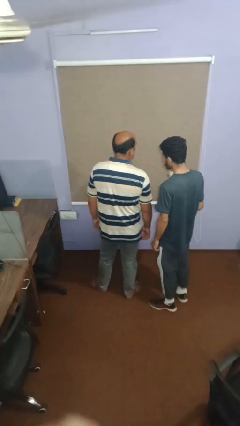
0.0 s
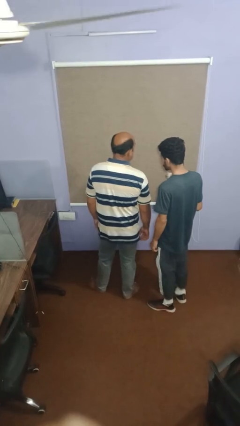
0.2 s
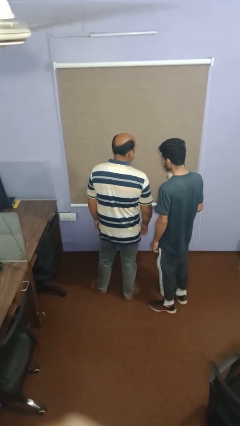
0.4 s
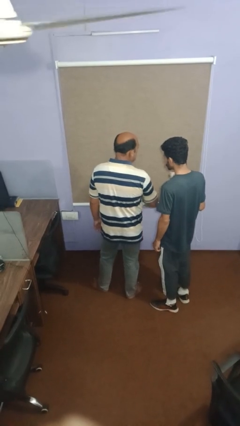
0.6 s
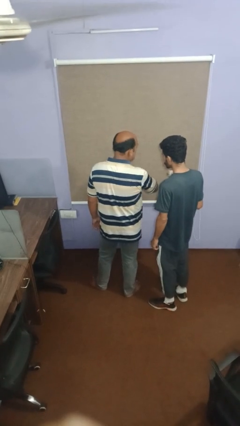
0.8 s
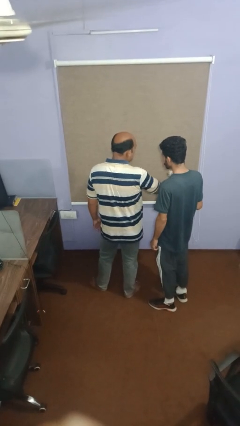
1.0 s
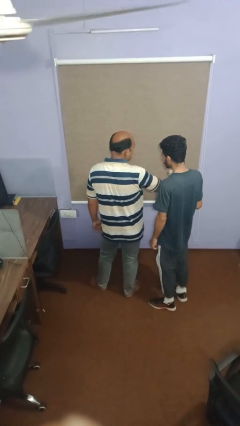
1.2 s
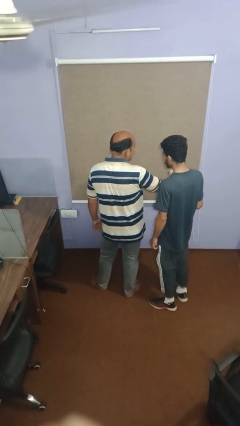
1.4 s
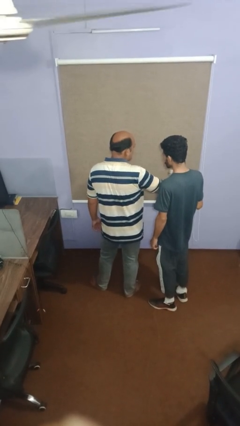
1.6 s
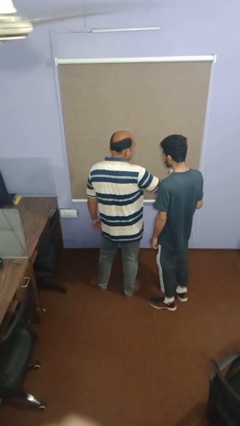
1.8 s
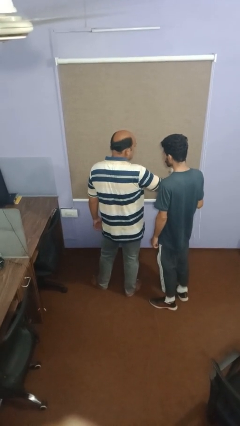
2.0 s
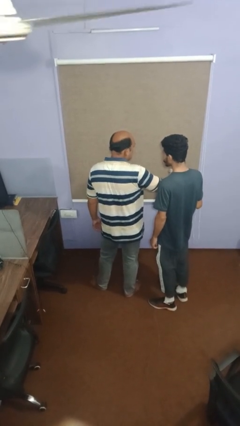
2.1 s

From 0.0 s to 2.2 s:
person nudges person with elbow

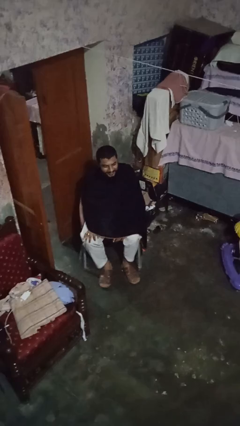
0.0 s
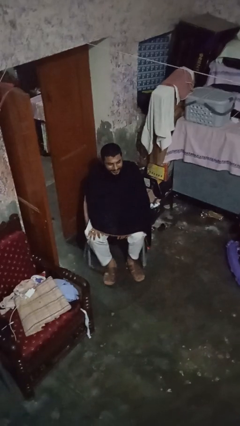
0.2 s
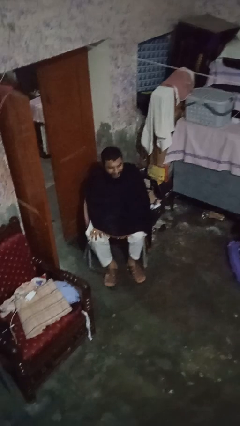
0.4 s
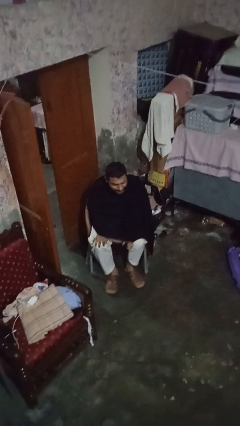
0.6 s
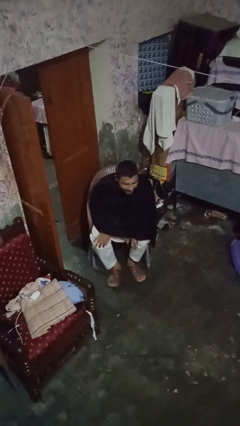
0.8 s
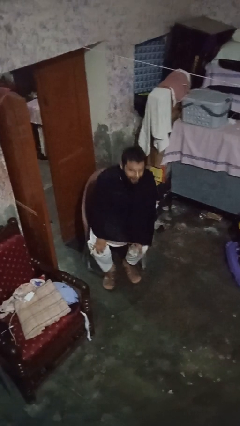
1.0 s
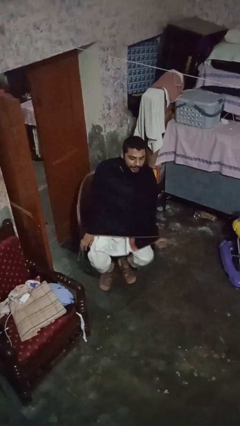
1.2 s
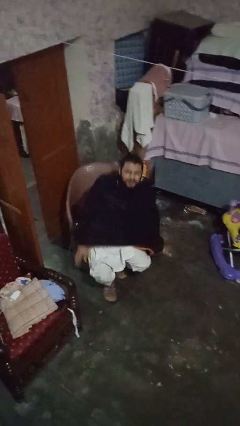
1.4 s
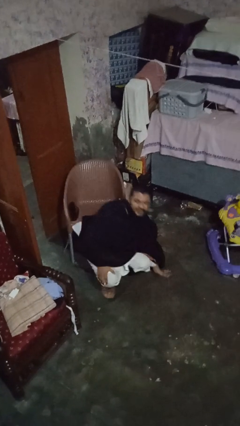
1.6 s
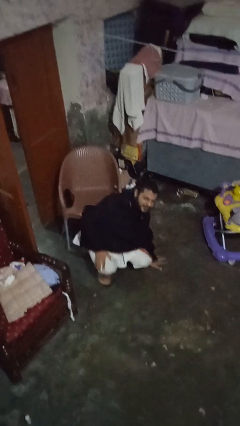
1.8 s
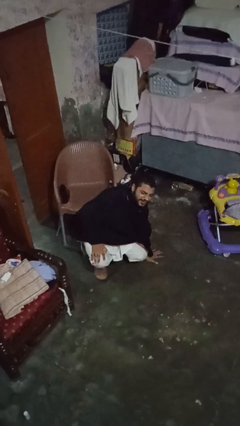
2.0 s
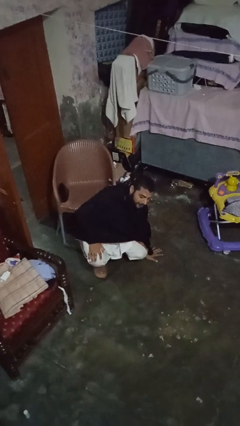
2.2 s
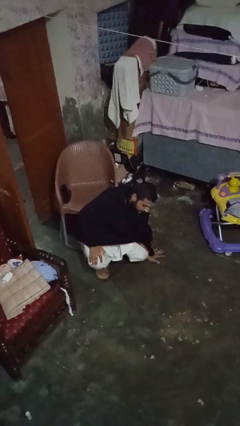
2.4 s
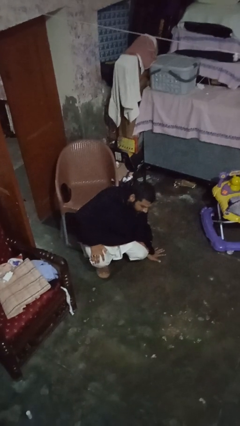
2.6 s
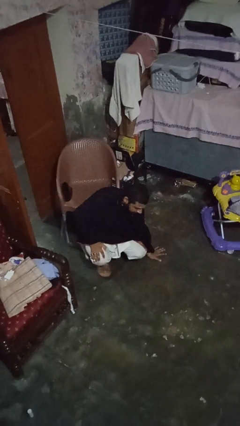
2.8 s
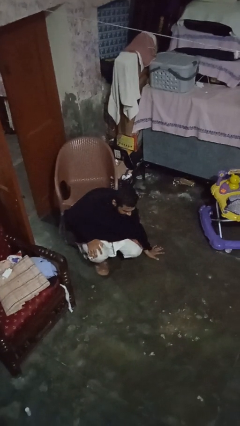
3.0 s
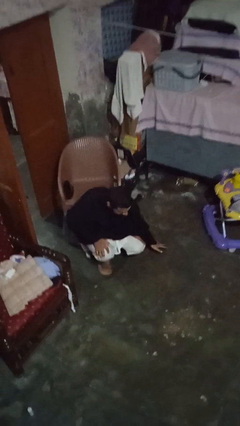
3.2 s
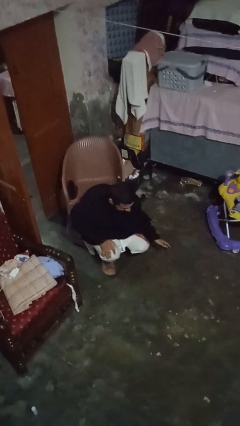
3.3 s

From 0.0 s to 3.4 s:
person falls from chair

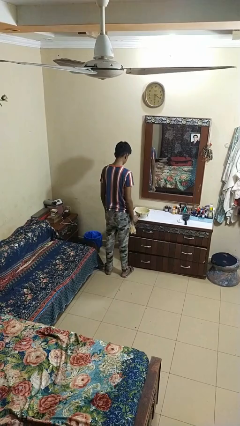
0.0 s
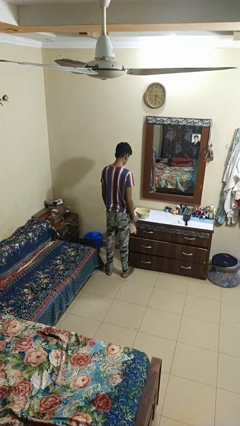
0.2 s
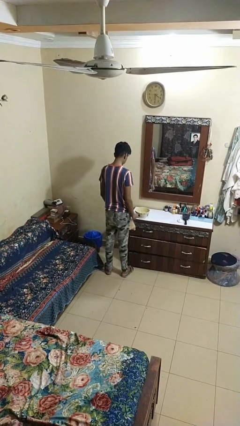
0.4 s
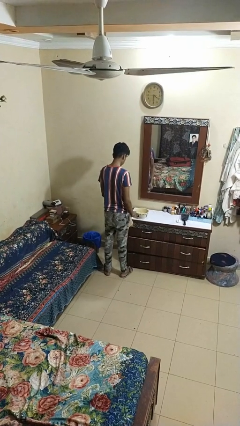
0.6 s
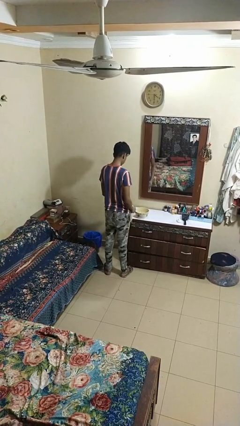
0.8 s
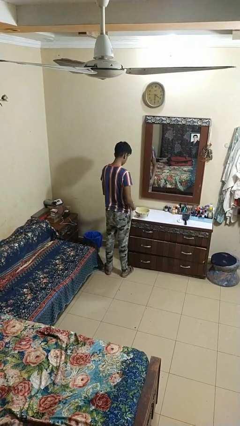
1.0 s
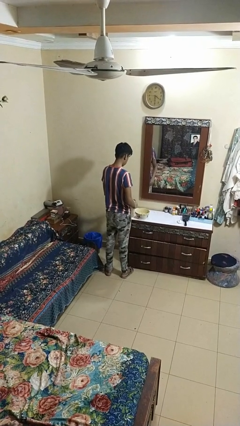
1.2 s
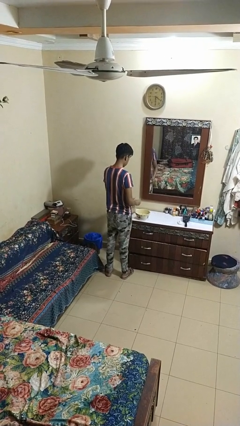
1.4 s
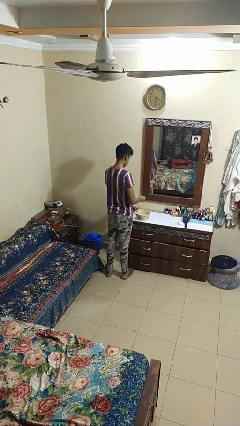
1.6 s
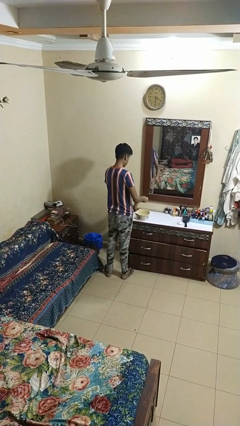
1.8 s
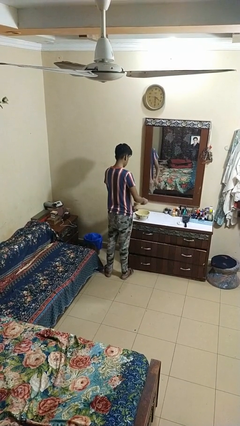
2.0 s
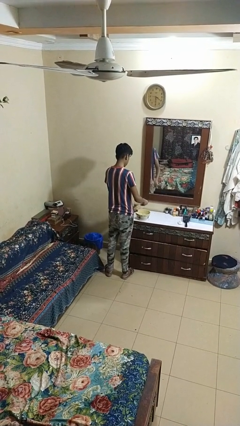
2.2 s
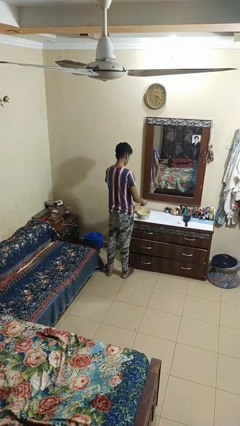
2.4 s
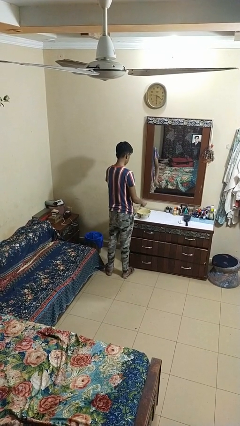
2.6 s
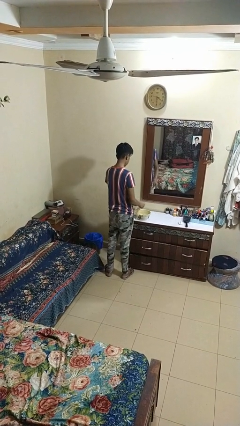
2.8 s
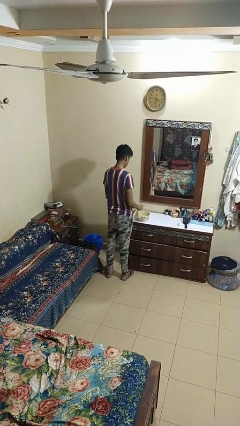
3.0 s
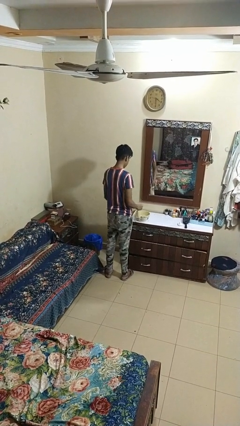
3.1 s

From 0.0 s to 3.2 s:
person pours into bowl

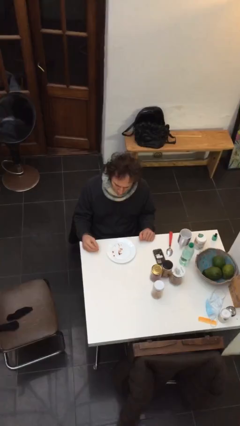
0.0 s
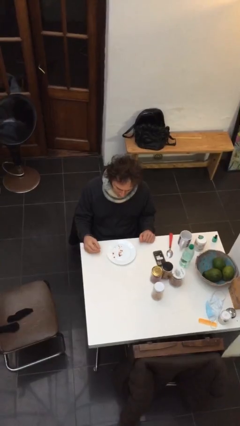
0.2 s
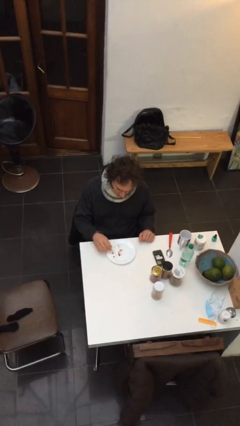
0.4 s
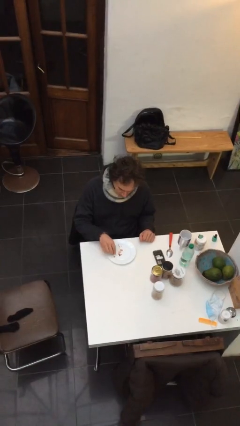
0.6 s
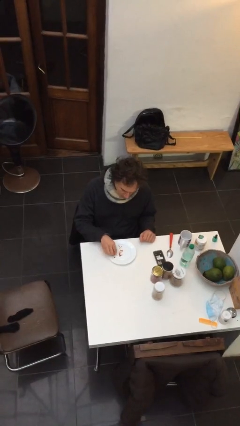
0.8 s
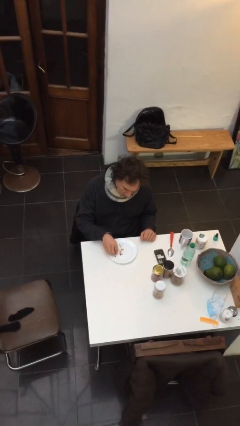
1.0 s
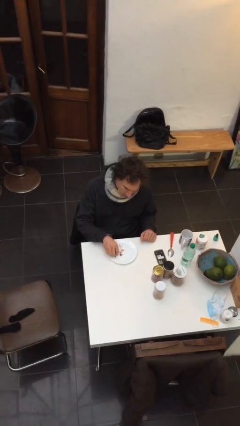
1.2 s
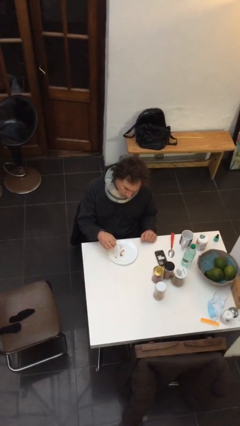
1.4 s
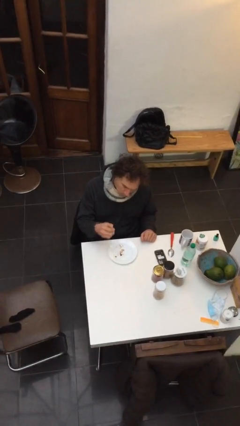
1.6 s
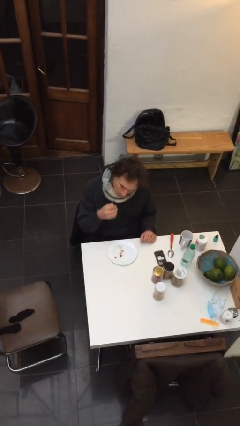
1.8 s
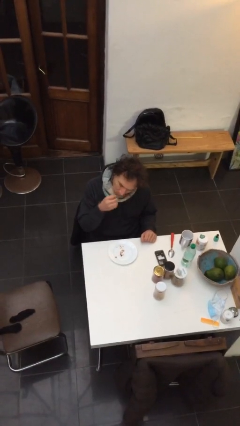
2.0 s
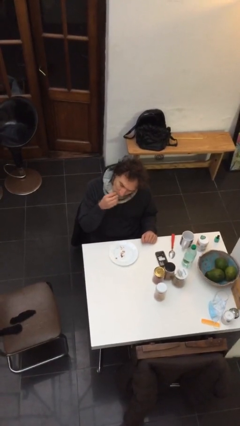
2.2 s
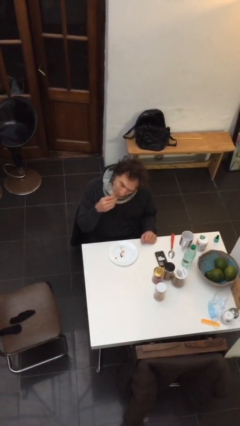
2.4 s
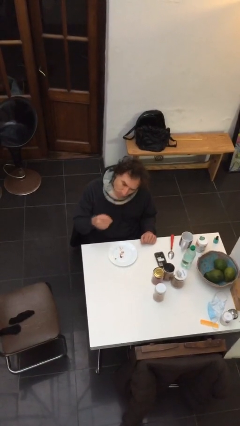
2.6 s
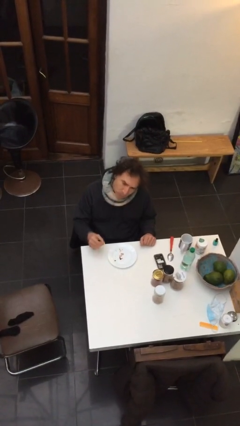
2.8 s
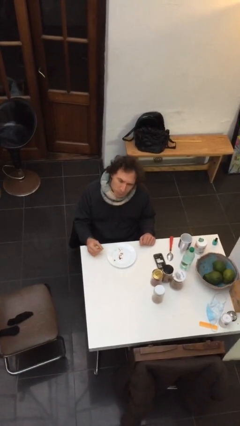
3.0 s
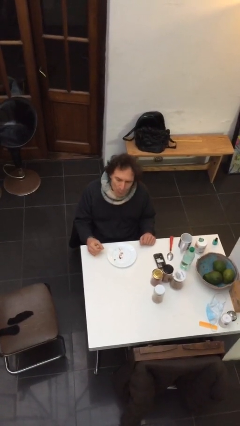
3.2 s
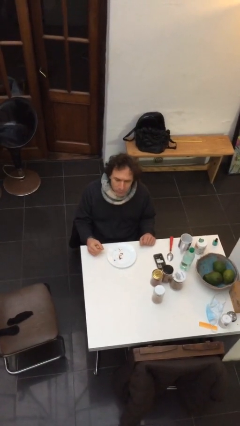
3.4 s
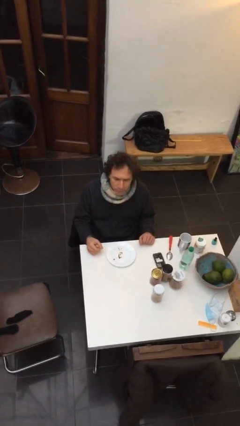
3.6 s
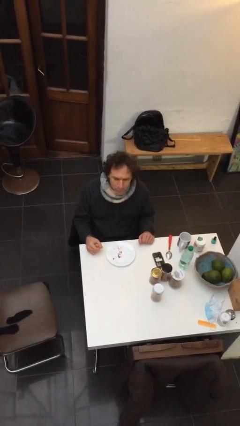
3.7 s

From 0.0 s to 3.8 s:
person eats with hands

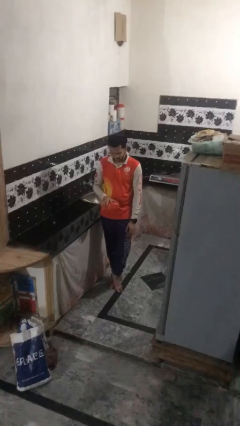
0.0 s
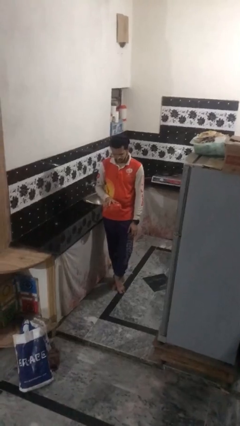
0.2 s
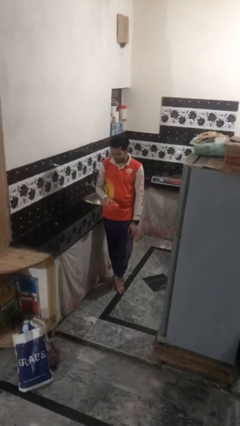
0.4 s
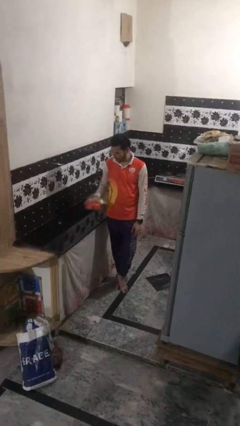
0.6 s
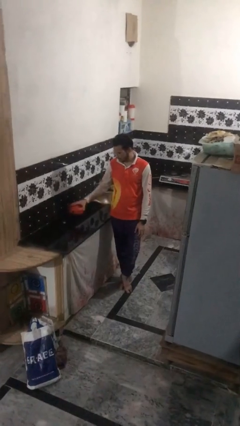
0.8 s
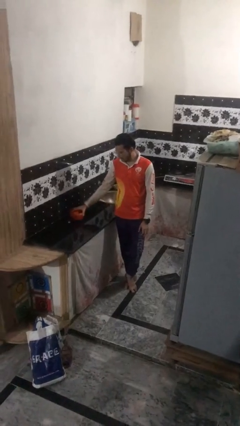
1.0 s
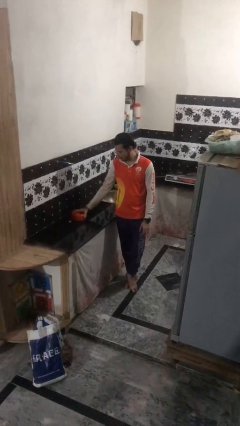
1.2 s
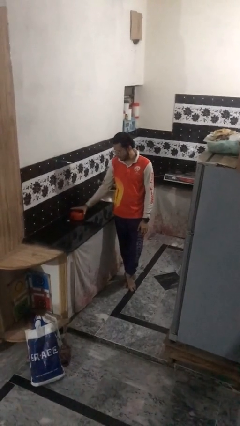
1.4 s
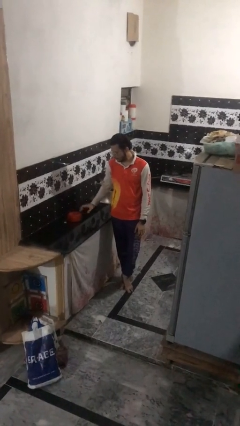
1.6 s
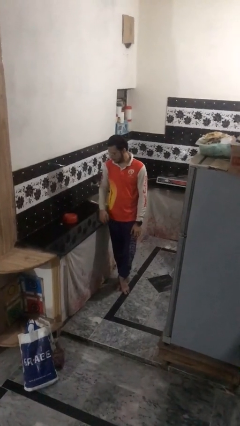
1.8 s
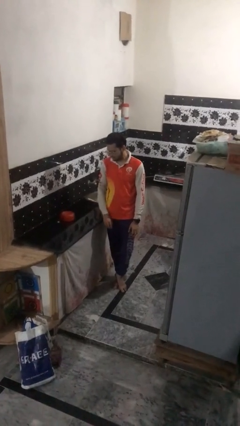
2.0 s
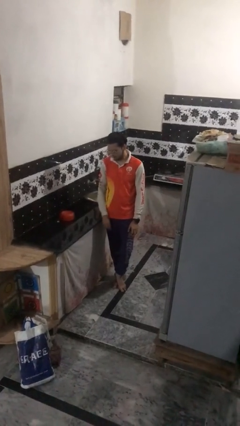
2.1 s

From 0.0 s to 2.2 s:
person puts down object on countertop

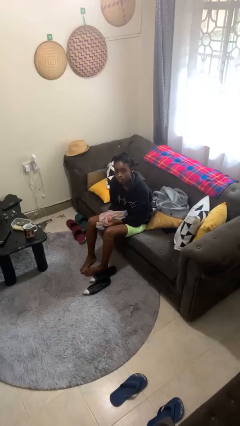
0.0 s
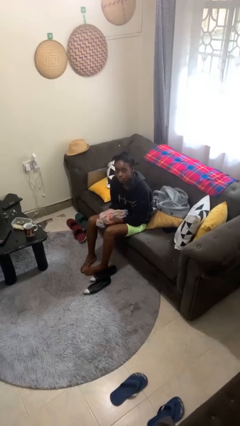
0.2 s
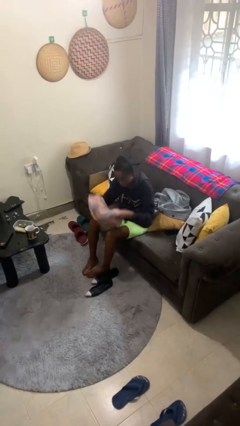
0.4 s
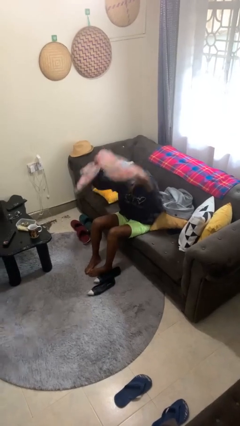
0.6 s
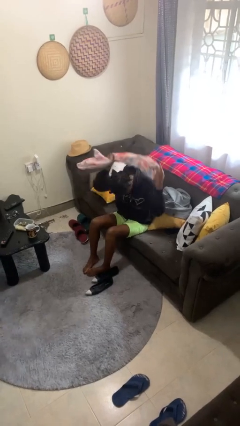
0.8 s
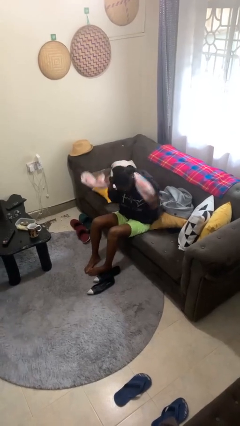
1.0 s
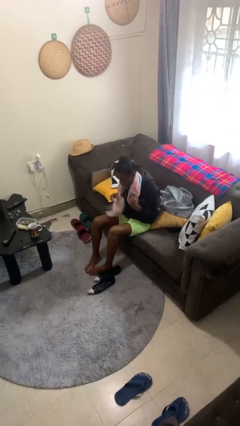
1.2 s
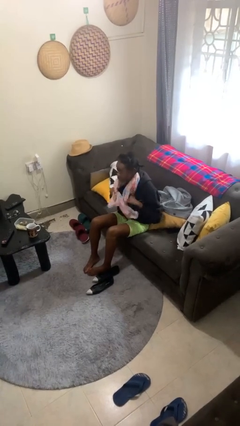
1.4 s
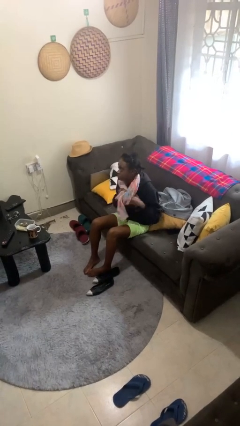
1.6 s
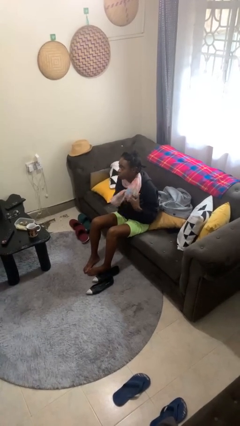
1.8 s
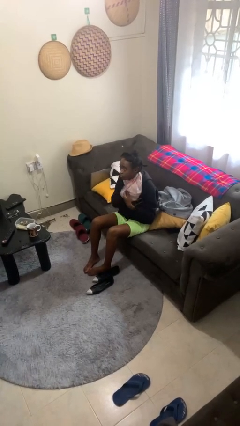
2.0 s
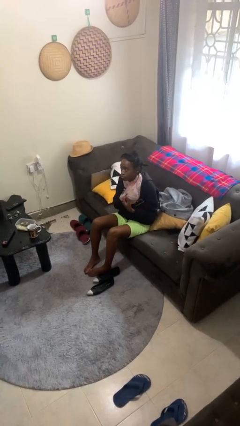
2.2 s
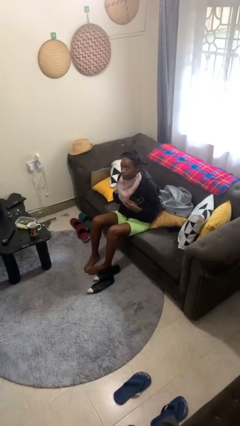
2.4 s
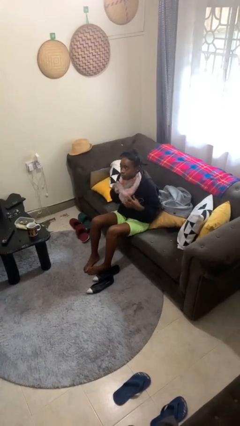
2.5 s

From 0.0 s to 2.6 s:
person puts on scarf
